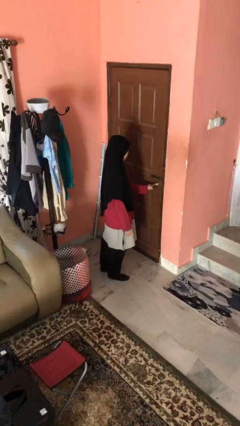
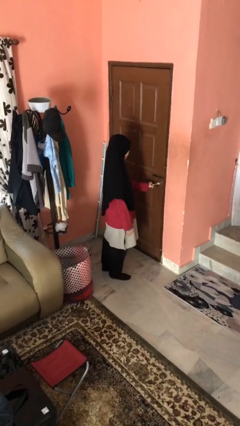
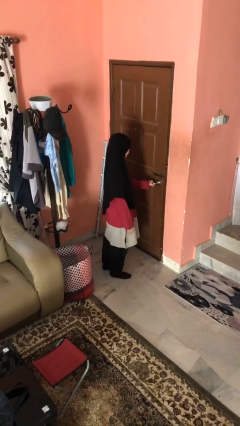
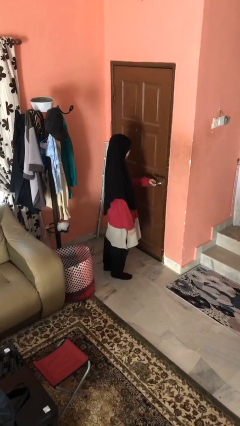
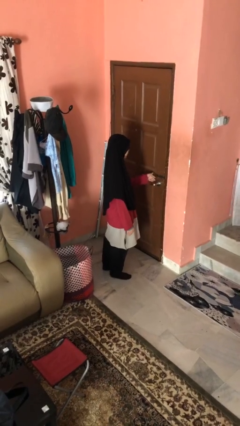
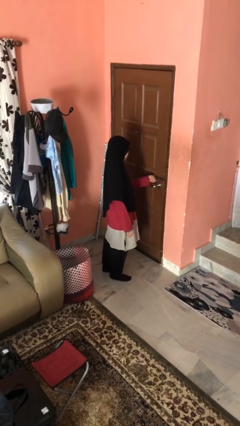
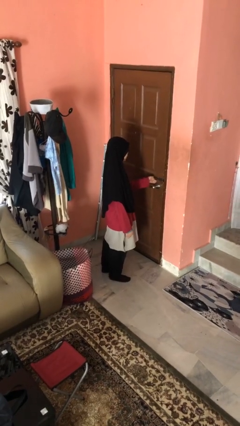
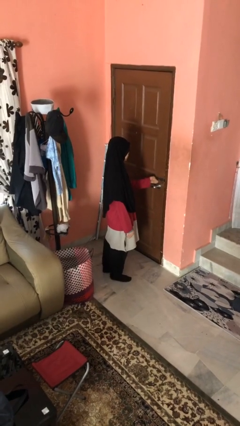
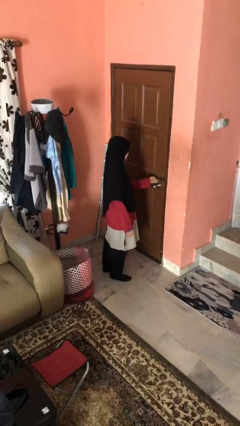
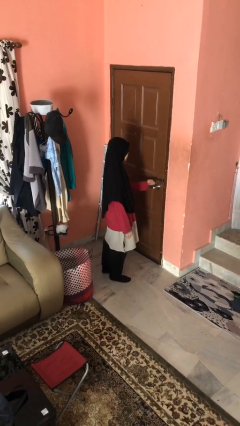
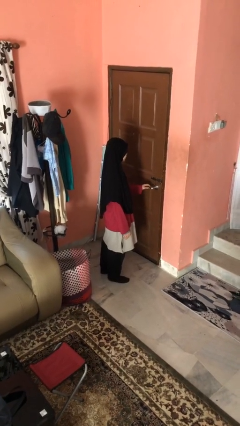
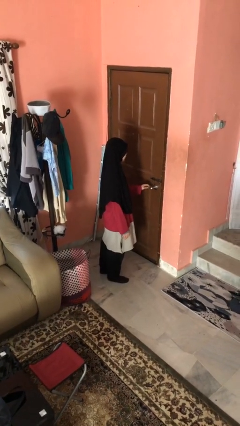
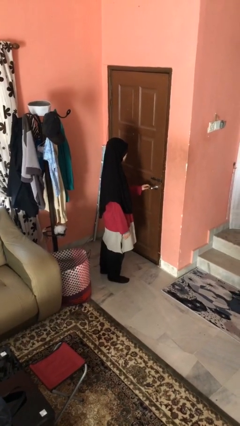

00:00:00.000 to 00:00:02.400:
person locks door with keys

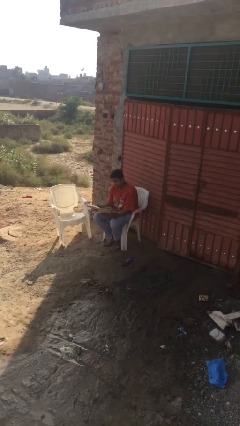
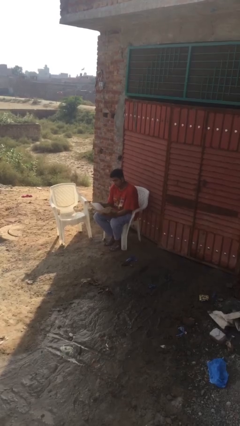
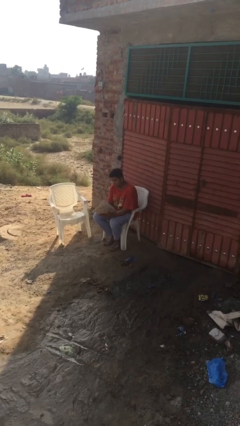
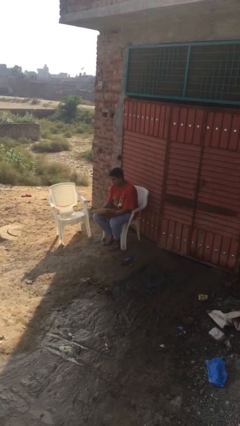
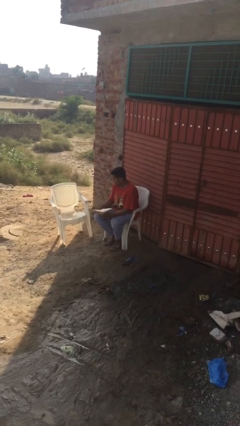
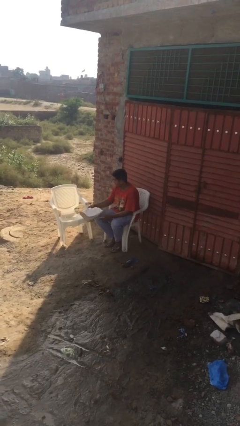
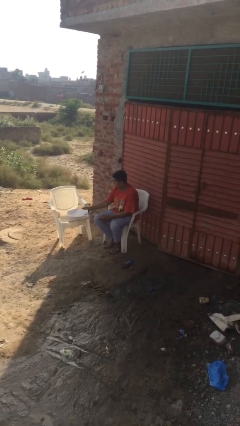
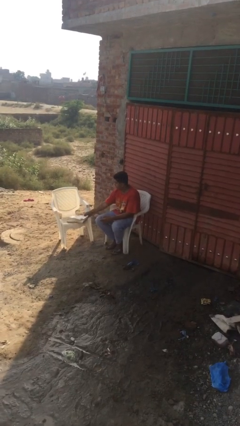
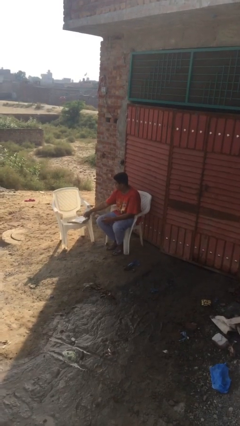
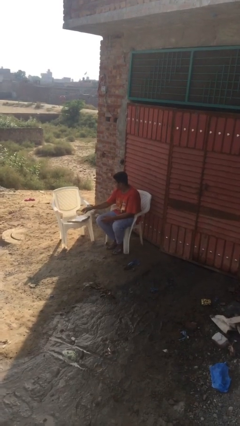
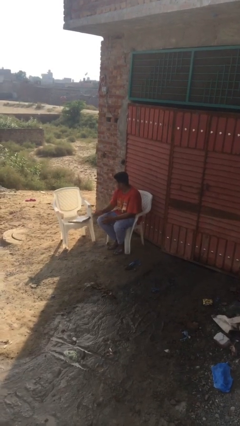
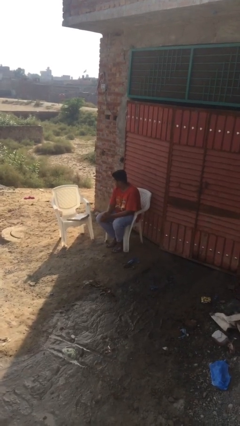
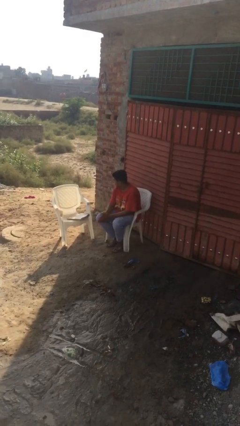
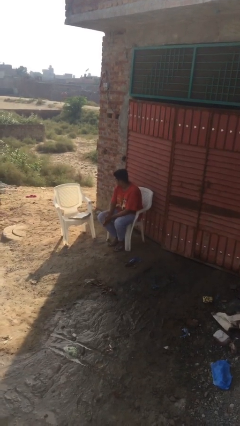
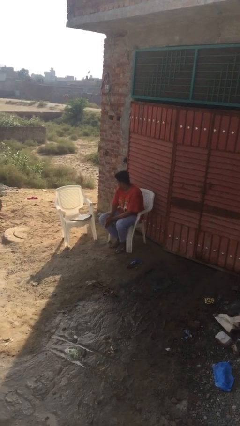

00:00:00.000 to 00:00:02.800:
person puts down object on table

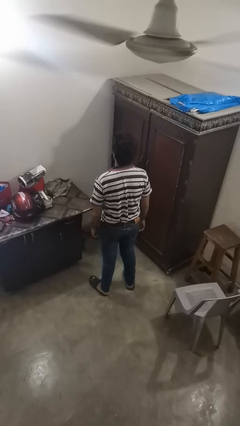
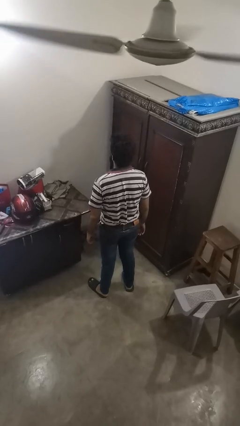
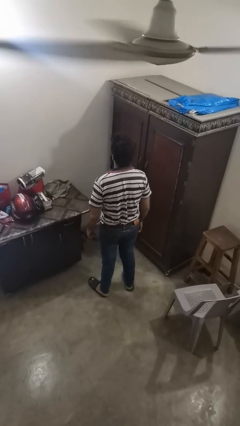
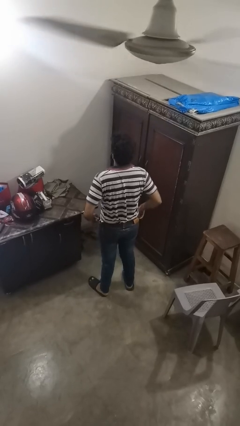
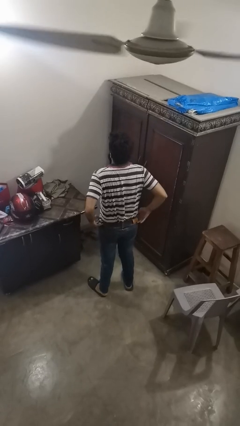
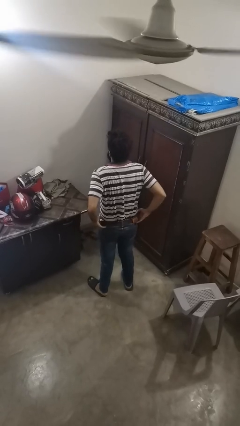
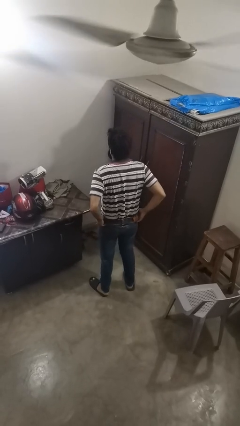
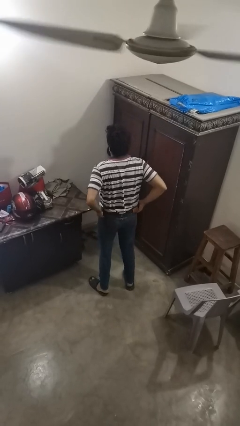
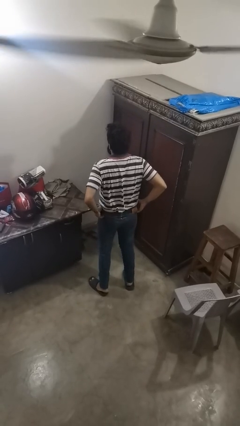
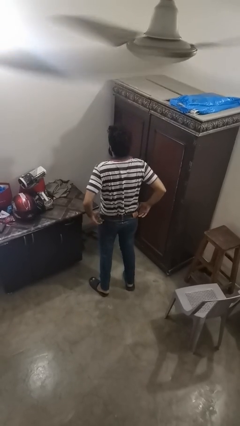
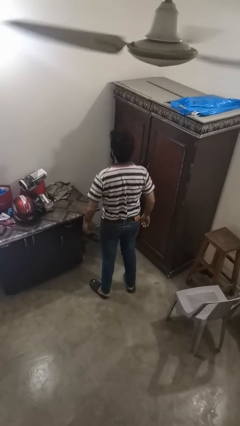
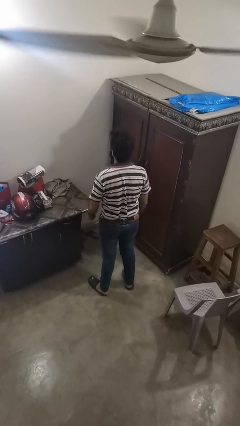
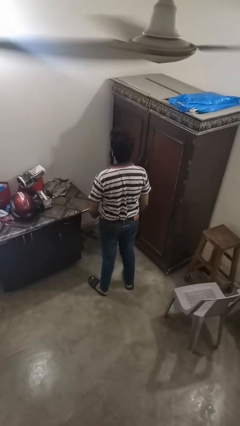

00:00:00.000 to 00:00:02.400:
person hikes up pants

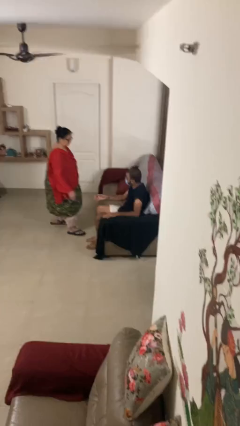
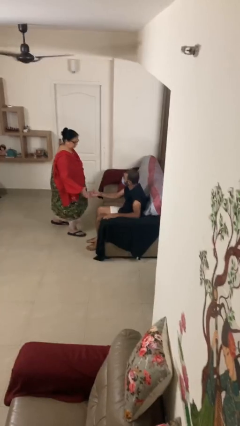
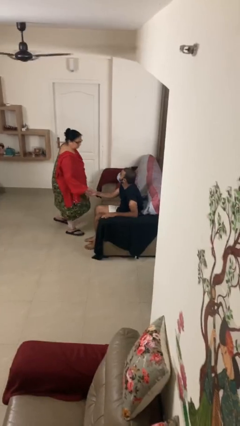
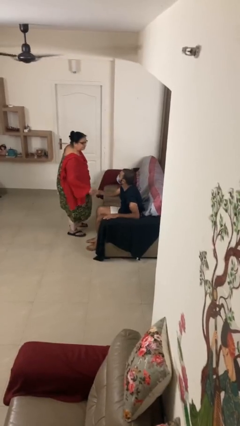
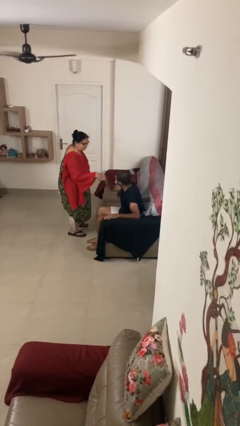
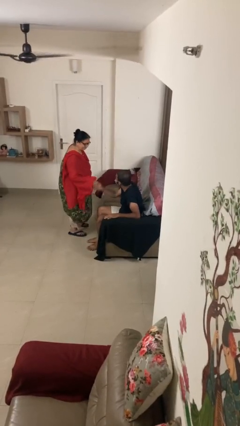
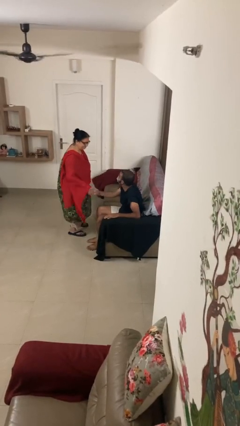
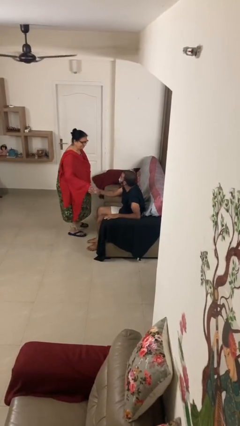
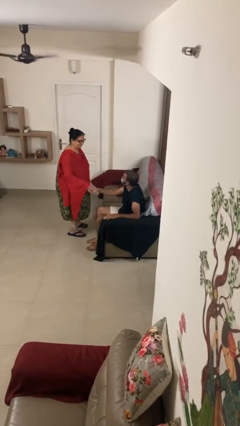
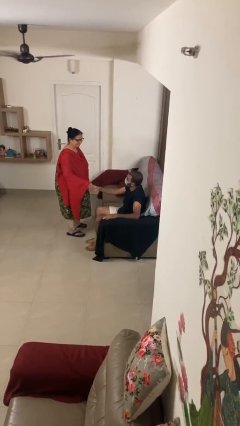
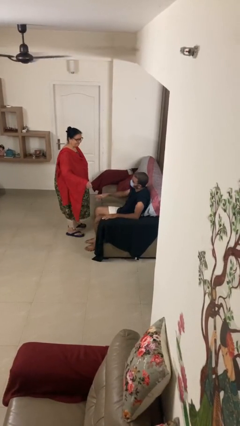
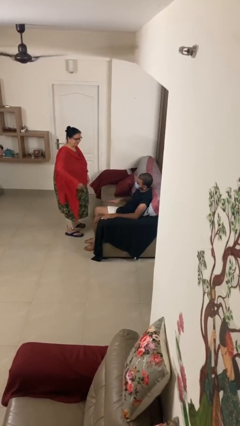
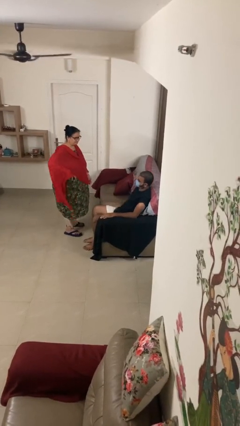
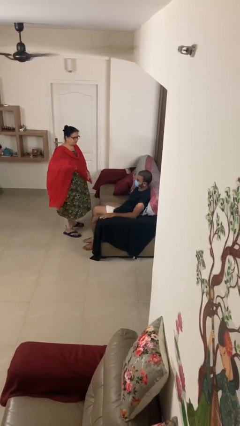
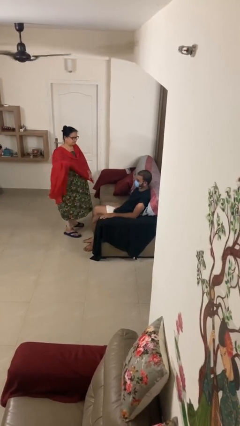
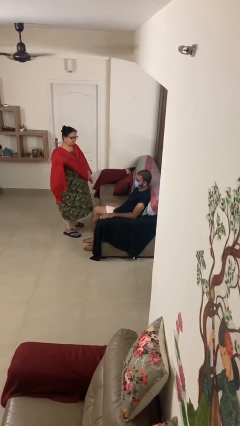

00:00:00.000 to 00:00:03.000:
person shakes hand

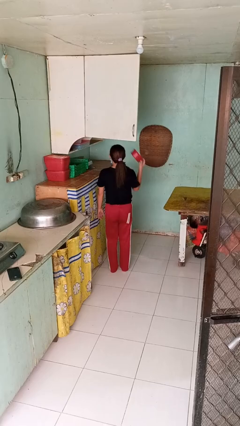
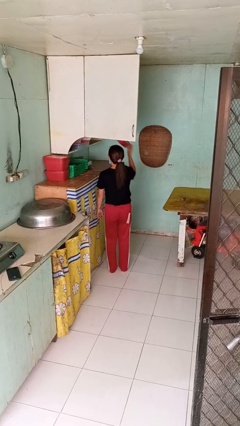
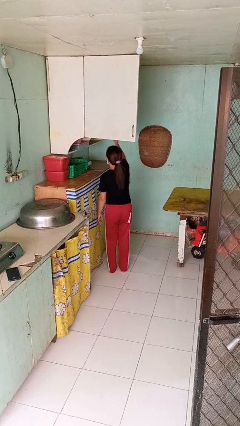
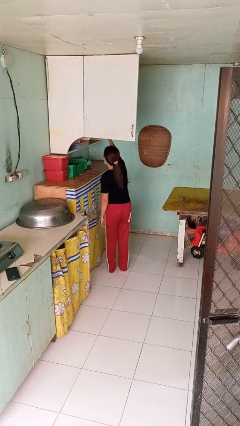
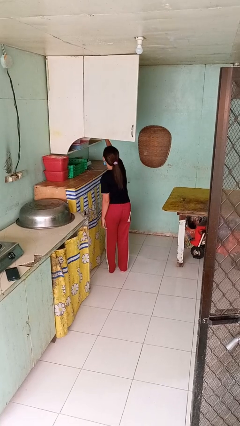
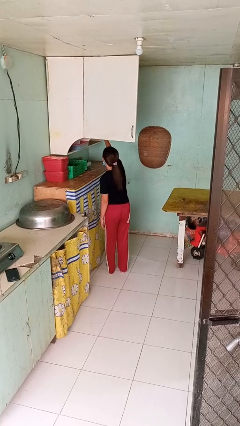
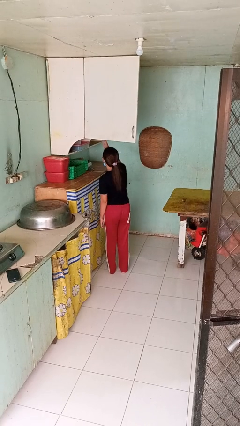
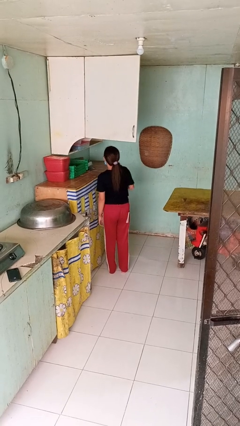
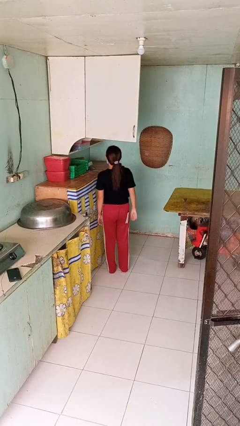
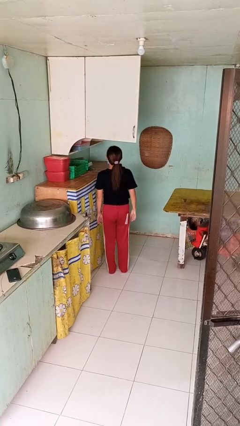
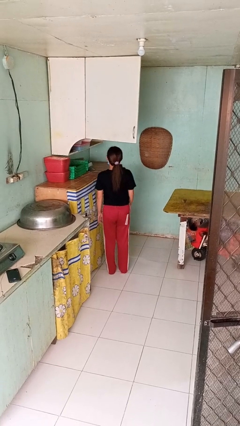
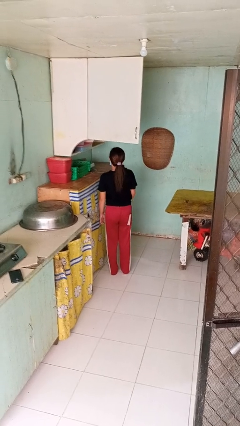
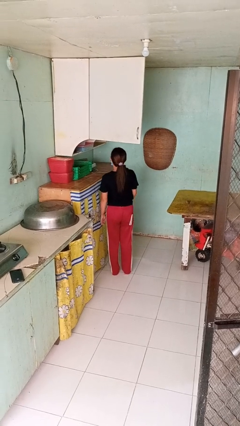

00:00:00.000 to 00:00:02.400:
person puts object in cabinet

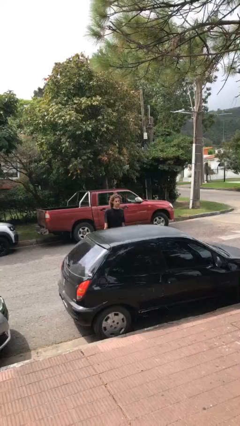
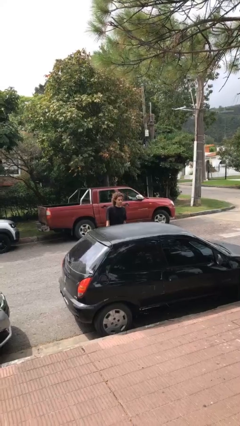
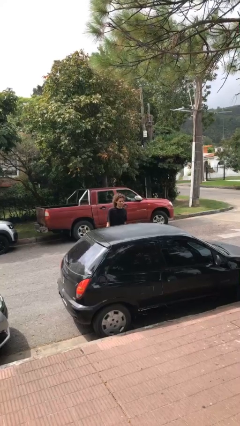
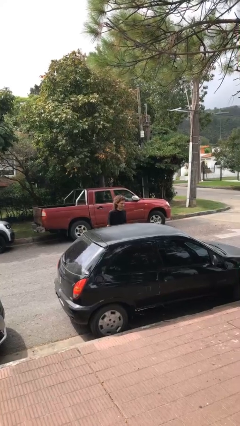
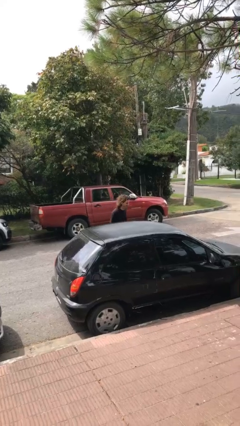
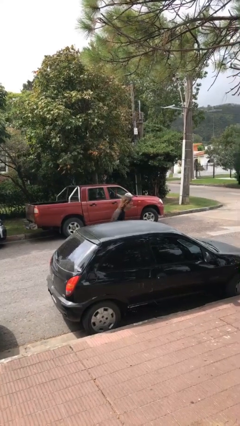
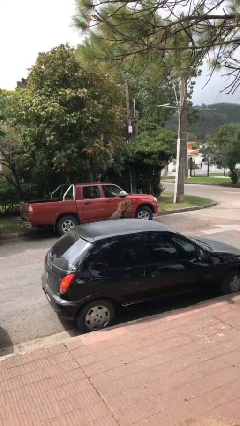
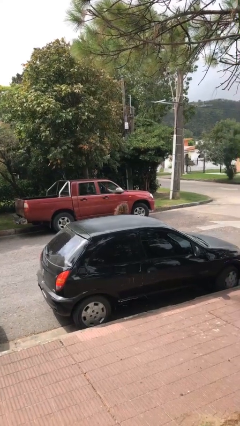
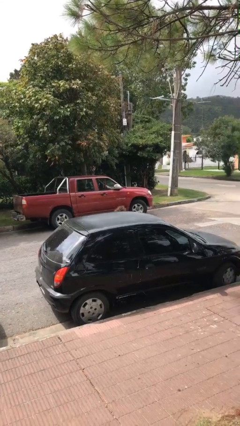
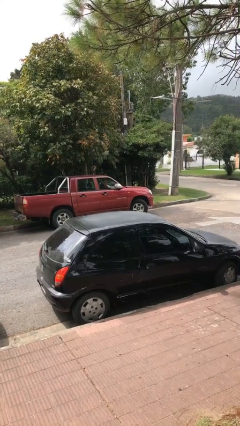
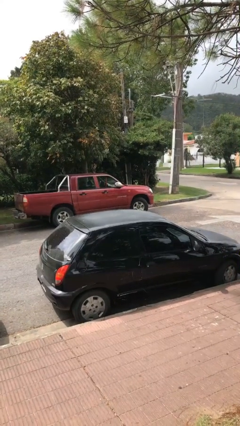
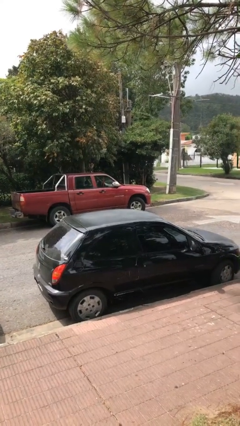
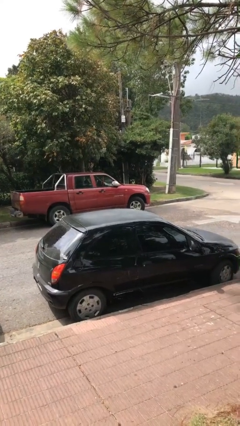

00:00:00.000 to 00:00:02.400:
person enters car

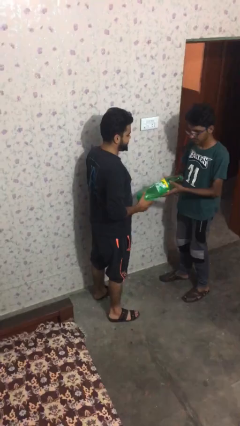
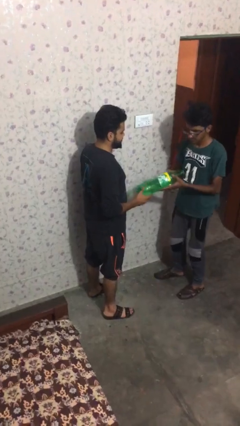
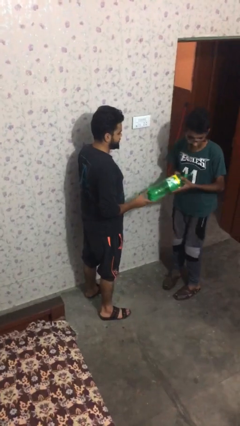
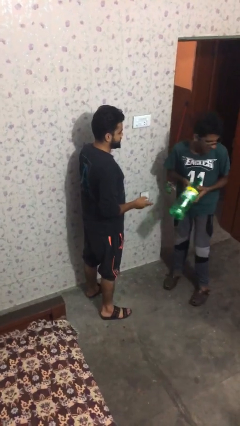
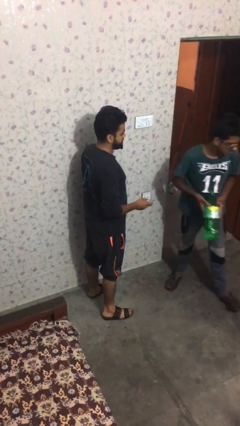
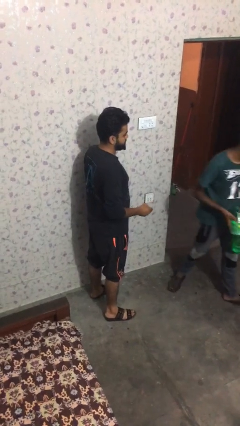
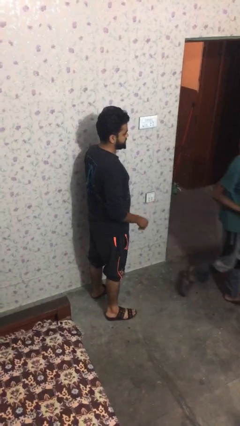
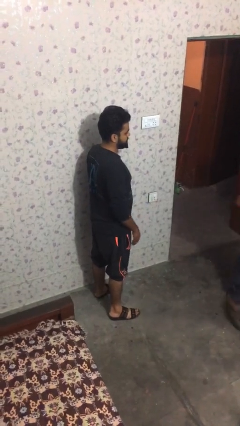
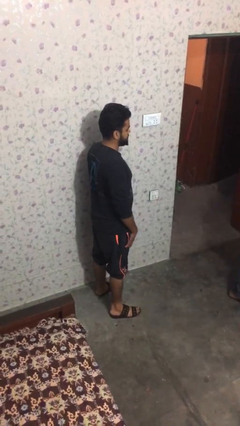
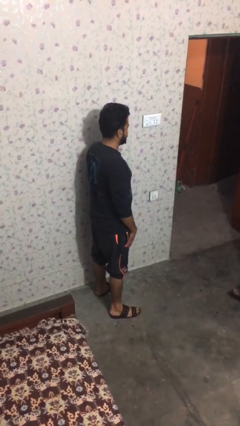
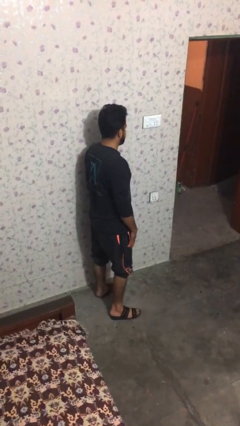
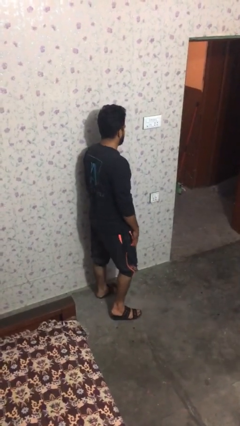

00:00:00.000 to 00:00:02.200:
person transfers object to person
